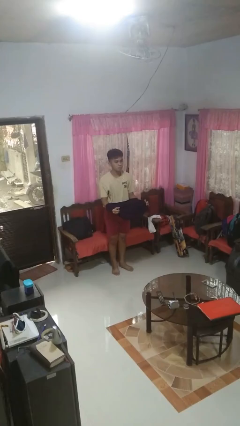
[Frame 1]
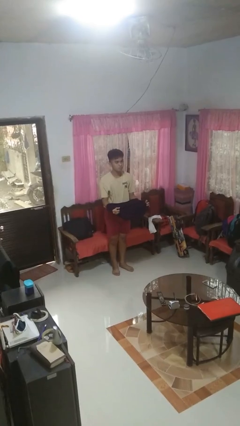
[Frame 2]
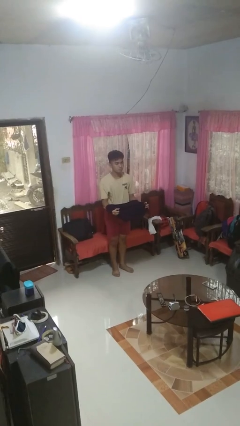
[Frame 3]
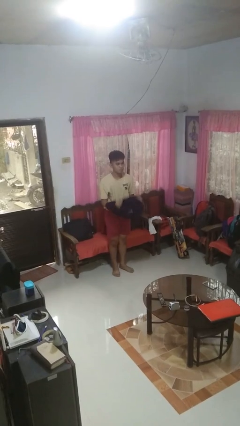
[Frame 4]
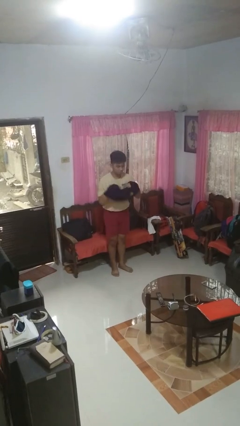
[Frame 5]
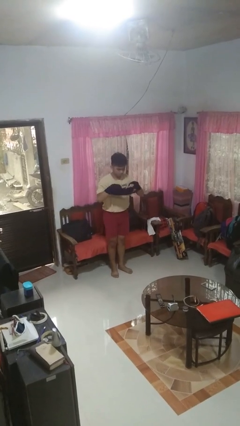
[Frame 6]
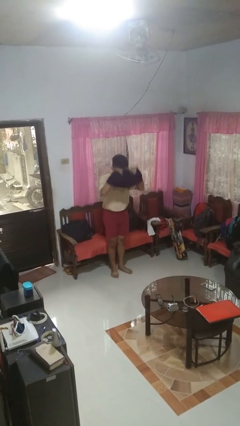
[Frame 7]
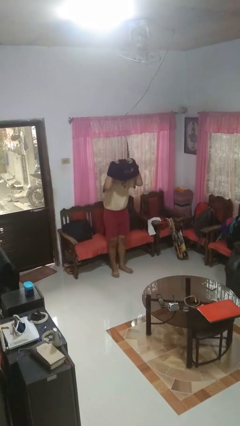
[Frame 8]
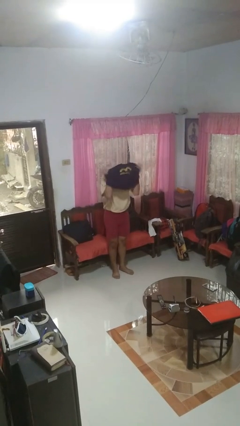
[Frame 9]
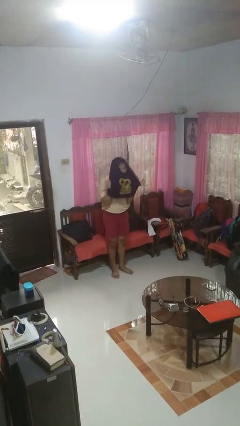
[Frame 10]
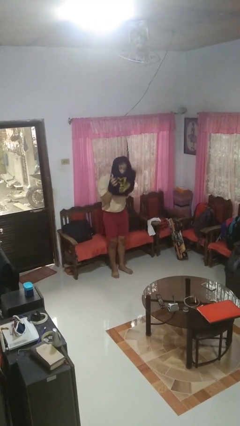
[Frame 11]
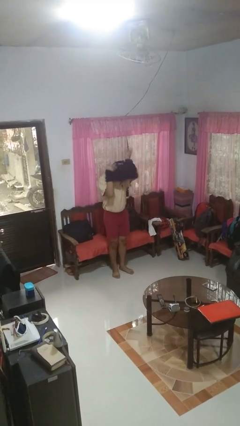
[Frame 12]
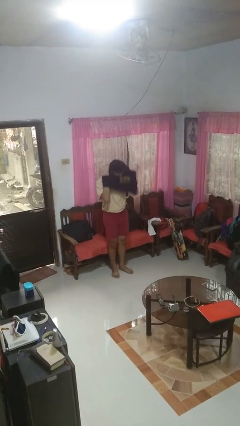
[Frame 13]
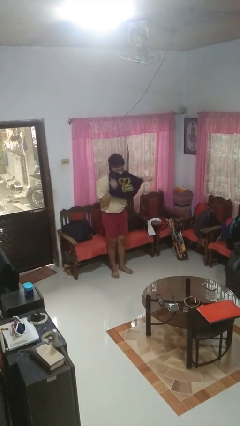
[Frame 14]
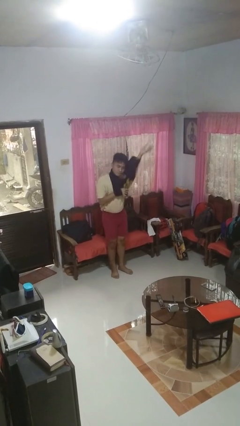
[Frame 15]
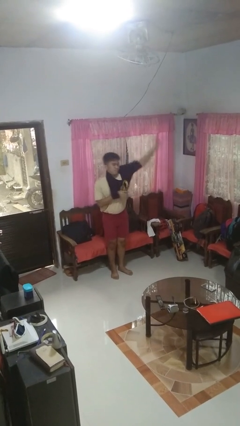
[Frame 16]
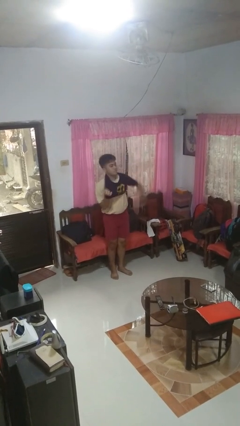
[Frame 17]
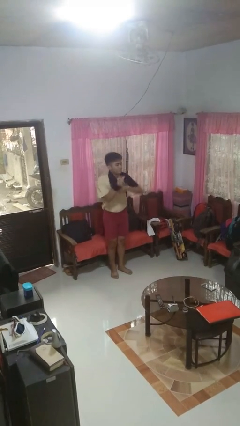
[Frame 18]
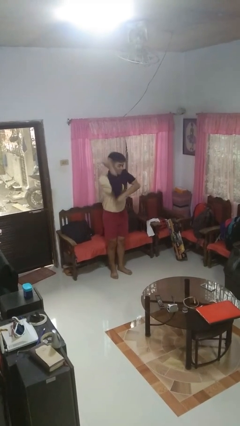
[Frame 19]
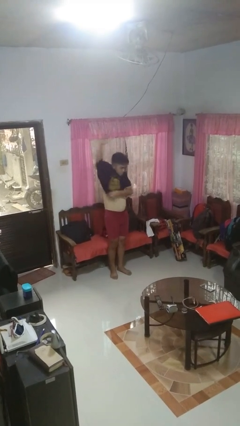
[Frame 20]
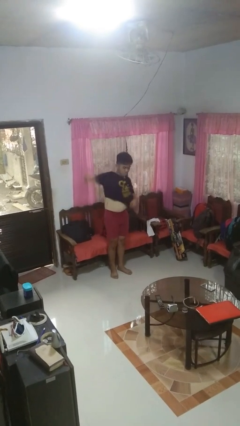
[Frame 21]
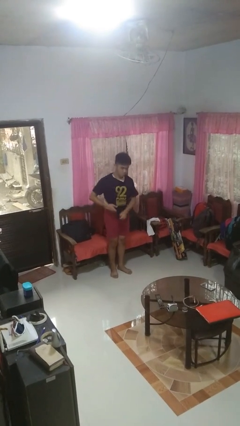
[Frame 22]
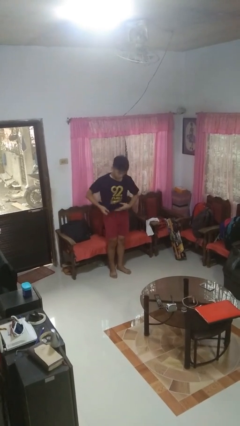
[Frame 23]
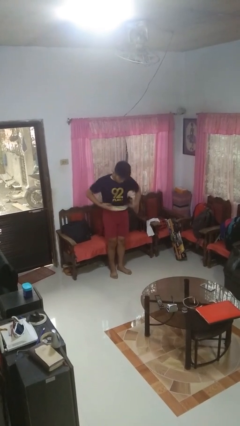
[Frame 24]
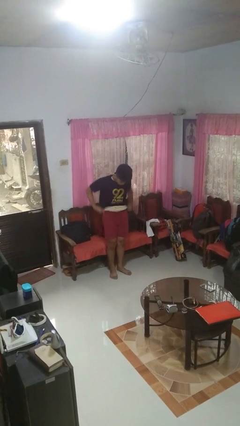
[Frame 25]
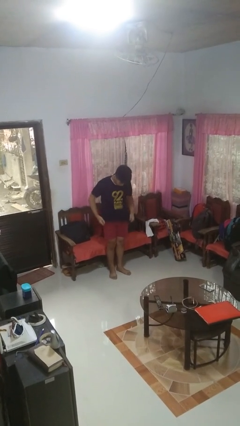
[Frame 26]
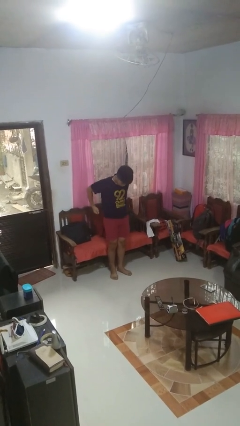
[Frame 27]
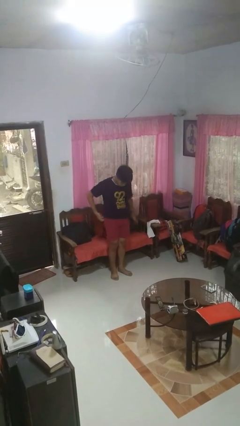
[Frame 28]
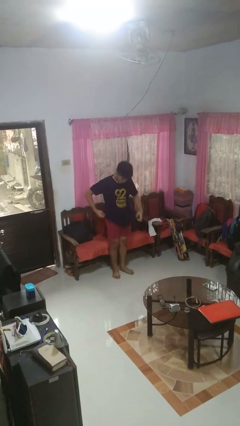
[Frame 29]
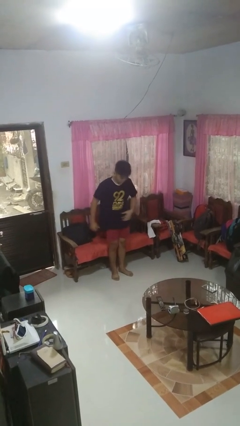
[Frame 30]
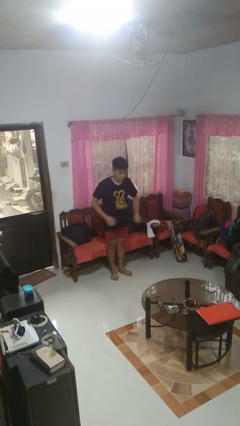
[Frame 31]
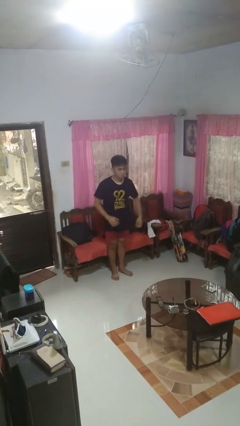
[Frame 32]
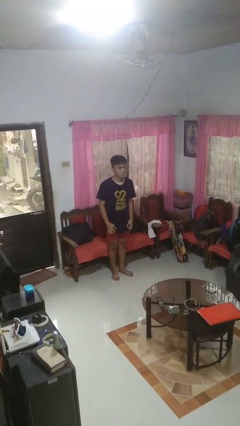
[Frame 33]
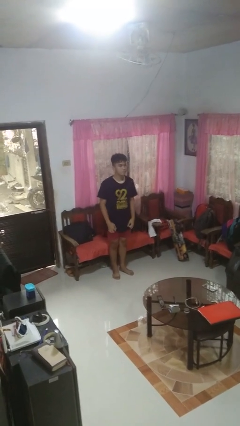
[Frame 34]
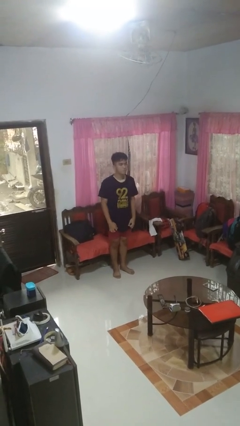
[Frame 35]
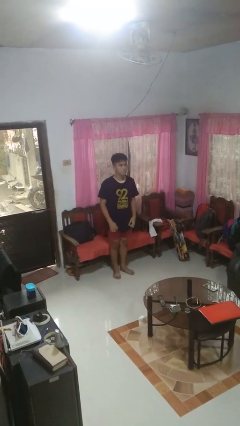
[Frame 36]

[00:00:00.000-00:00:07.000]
person puts on shirt

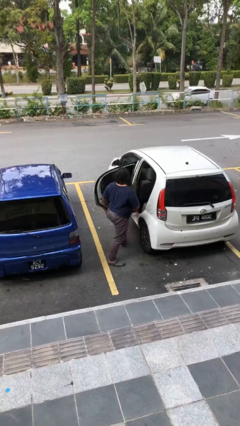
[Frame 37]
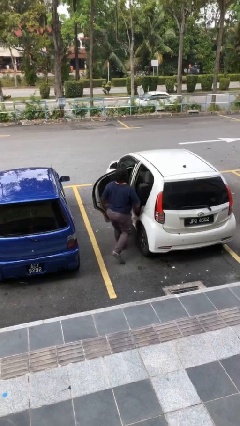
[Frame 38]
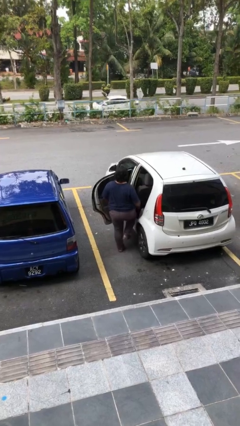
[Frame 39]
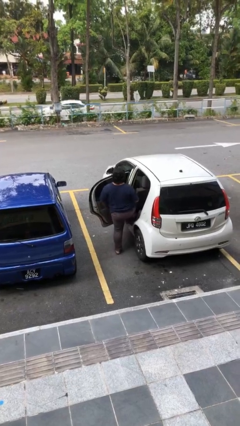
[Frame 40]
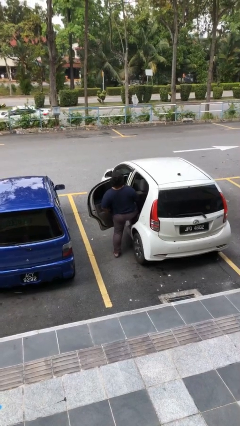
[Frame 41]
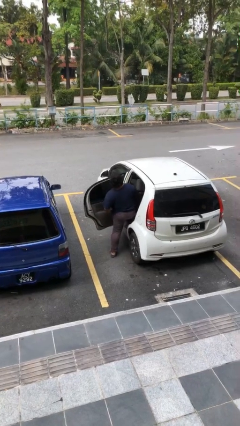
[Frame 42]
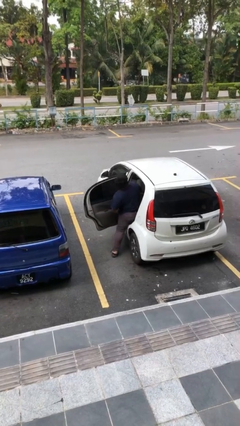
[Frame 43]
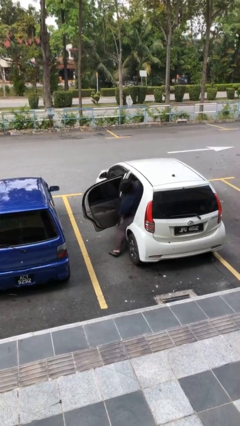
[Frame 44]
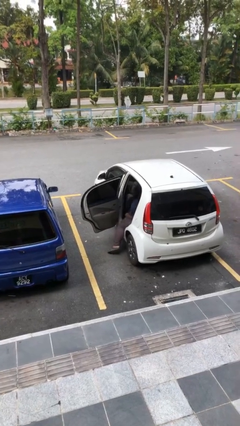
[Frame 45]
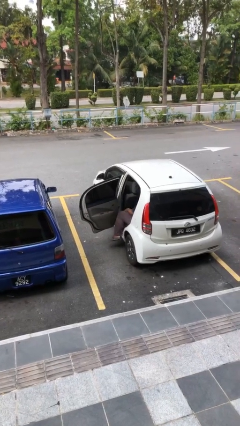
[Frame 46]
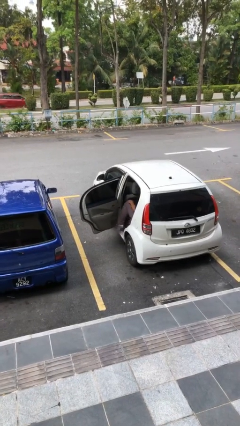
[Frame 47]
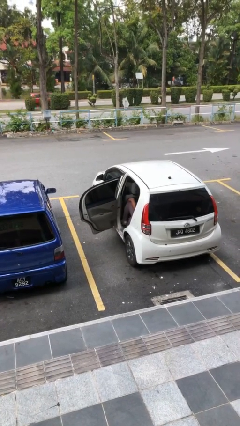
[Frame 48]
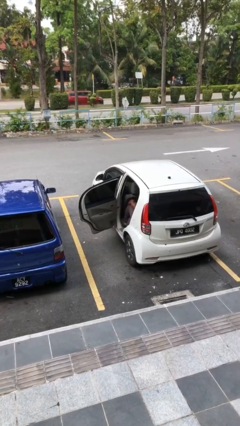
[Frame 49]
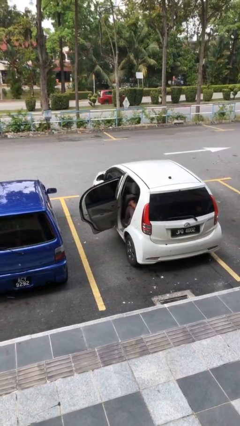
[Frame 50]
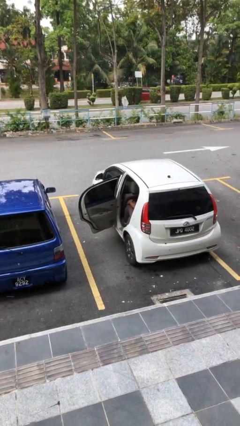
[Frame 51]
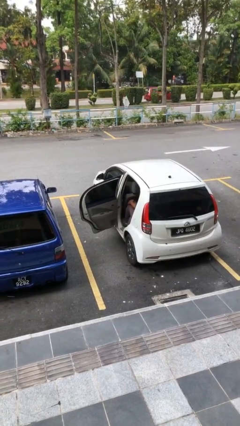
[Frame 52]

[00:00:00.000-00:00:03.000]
person enters car

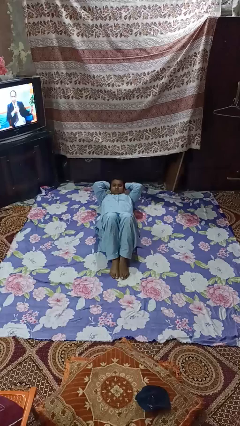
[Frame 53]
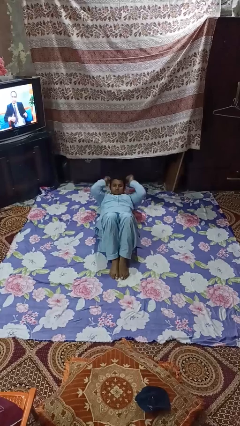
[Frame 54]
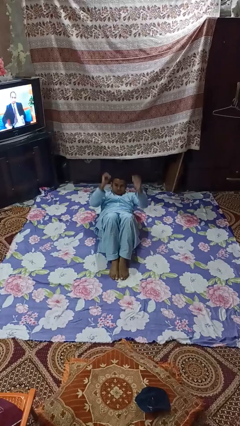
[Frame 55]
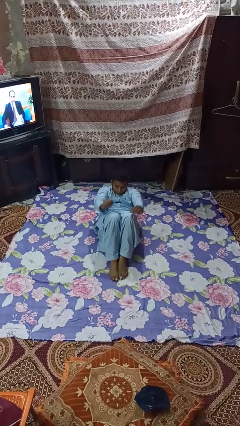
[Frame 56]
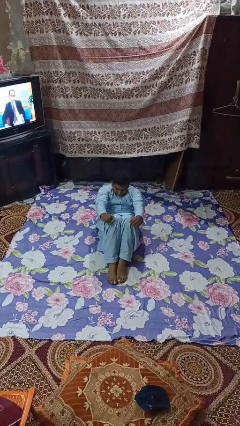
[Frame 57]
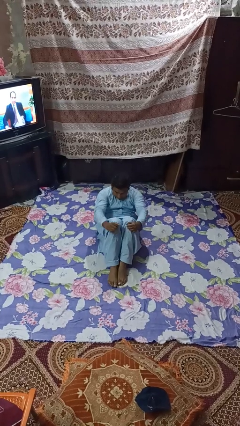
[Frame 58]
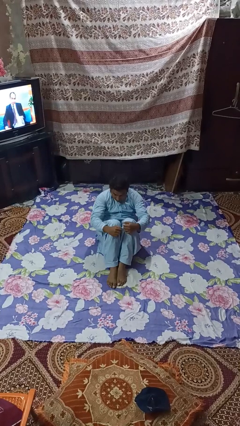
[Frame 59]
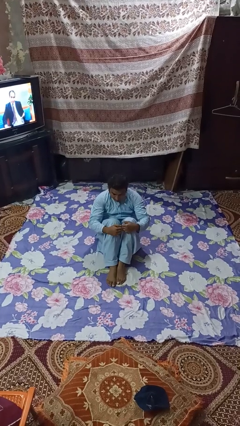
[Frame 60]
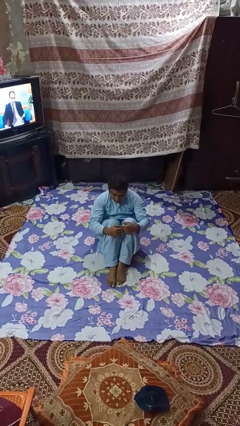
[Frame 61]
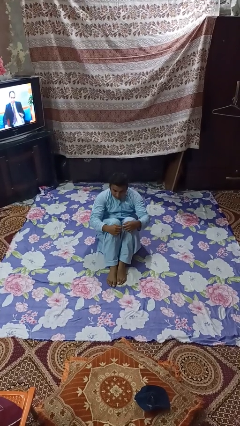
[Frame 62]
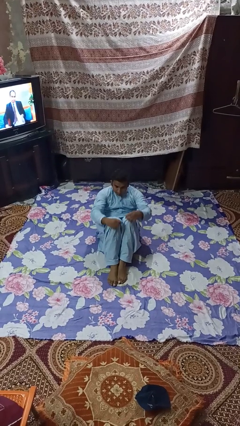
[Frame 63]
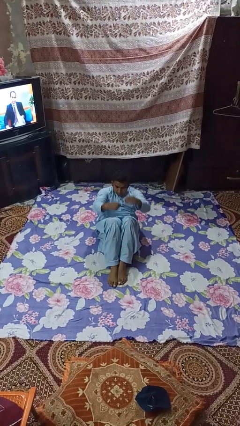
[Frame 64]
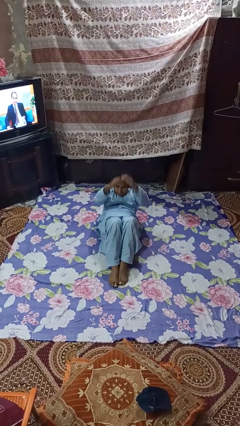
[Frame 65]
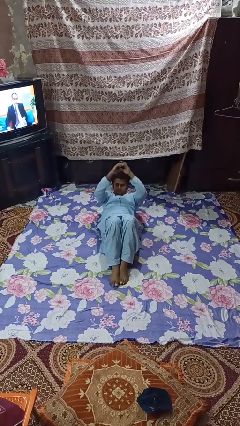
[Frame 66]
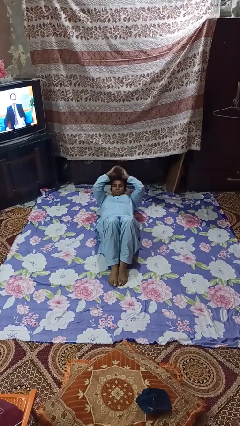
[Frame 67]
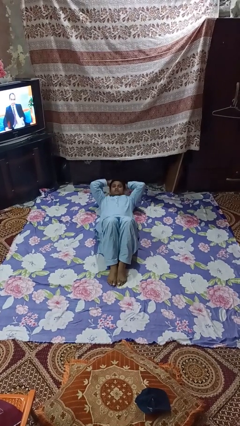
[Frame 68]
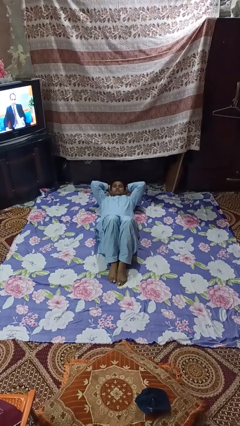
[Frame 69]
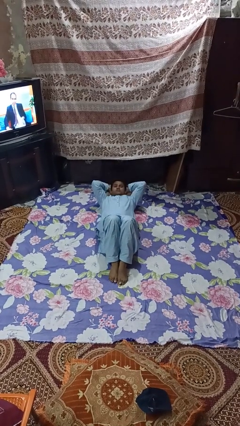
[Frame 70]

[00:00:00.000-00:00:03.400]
person exercises with situp

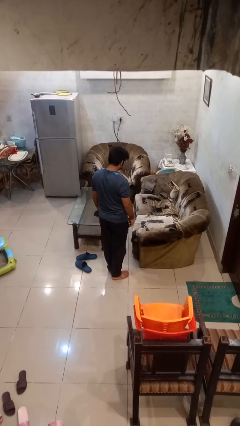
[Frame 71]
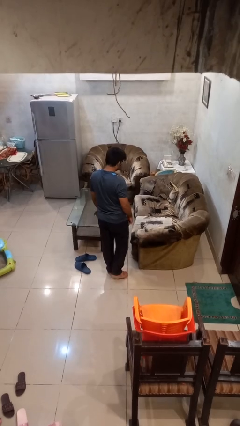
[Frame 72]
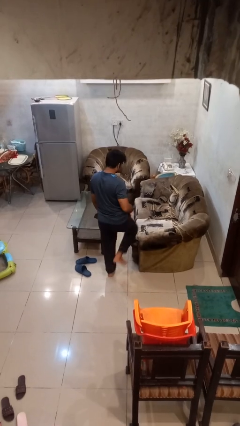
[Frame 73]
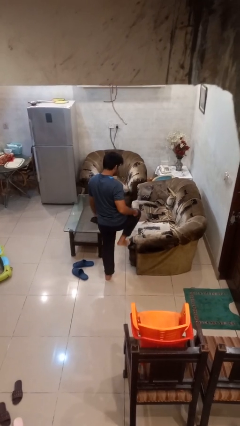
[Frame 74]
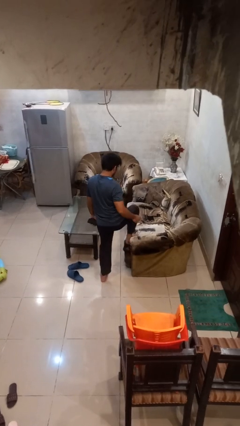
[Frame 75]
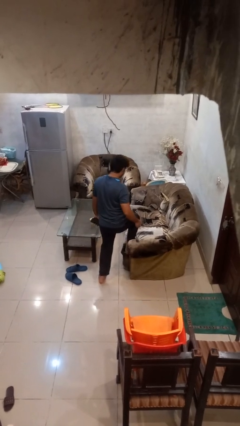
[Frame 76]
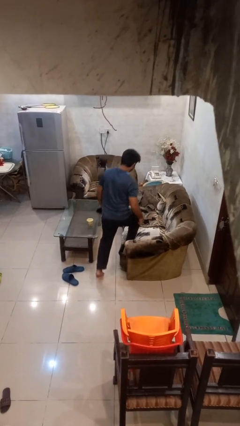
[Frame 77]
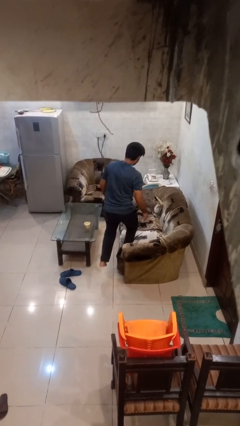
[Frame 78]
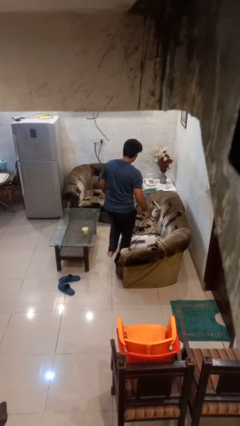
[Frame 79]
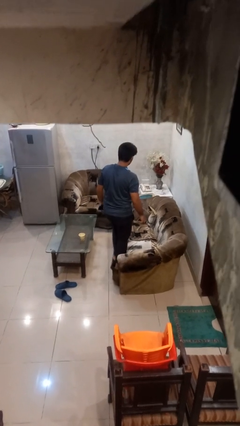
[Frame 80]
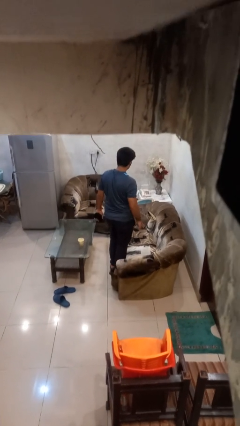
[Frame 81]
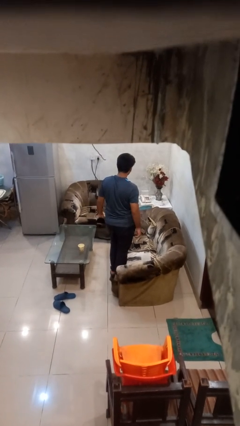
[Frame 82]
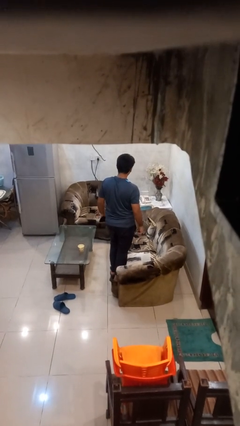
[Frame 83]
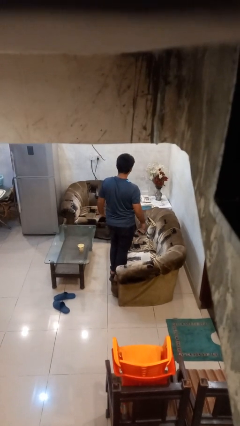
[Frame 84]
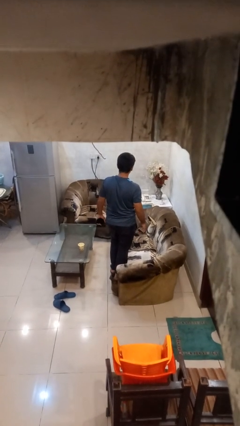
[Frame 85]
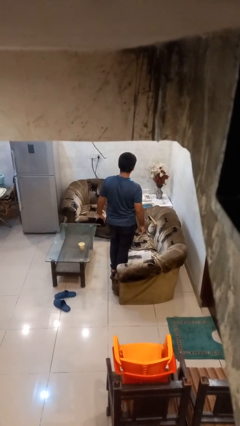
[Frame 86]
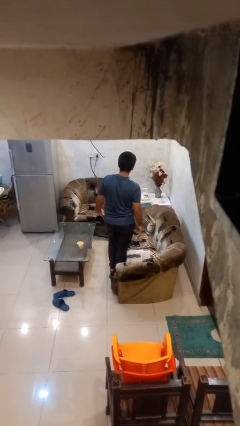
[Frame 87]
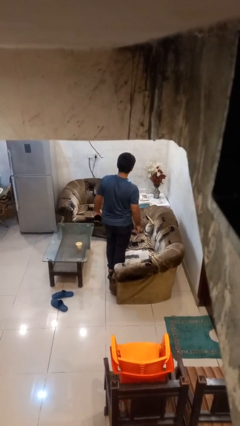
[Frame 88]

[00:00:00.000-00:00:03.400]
person climbs on couch

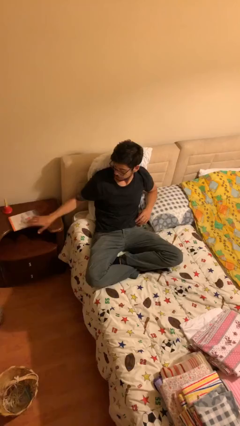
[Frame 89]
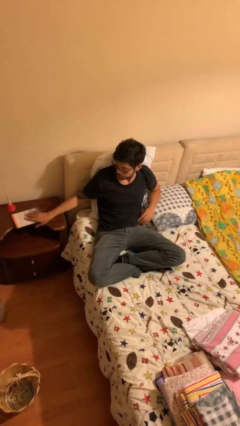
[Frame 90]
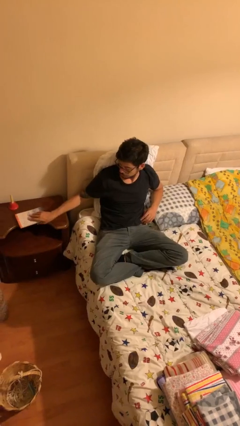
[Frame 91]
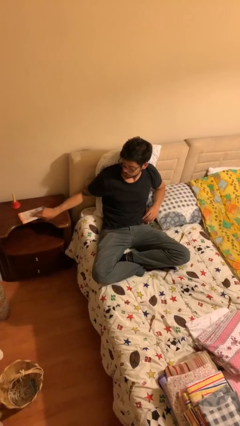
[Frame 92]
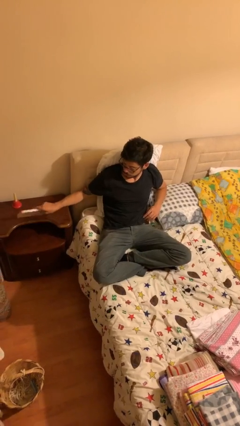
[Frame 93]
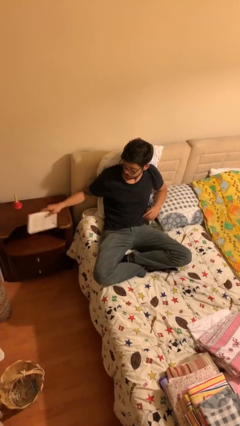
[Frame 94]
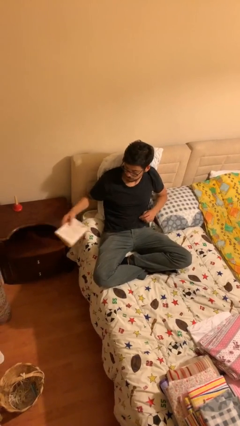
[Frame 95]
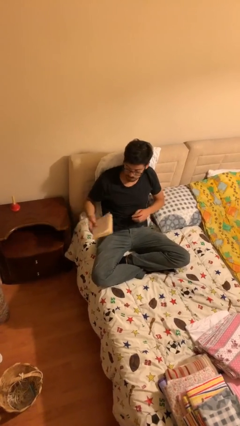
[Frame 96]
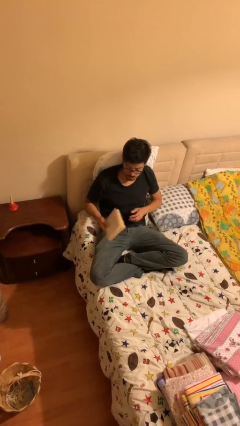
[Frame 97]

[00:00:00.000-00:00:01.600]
person picks up object from table
